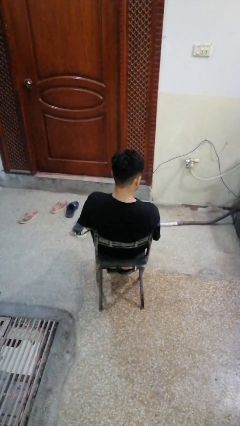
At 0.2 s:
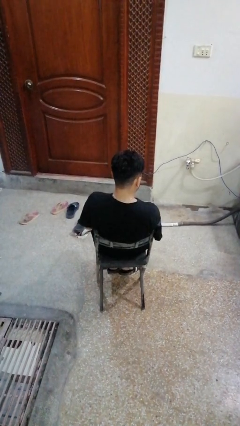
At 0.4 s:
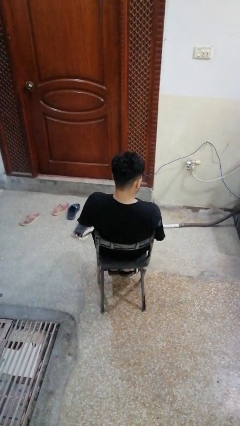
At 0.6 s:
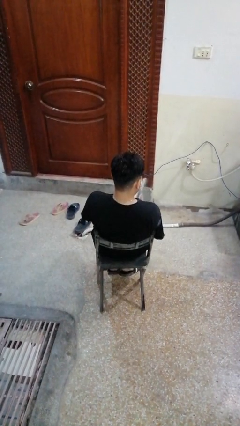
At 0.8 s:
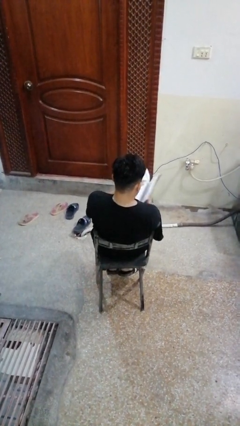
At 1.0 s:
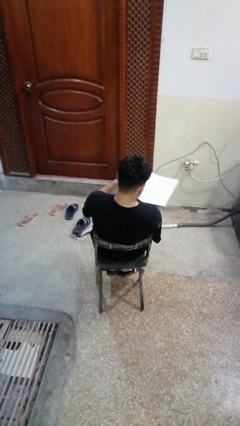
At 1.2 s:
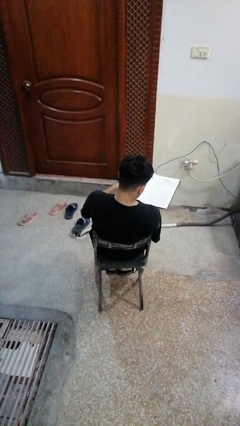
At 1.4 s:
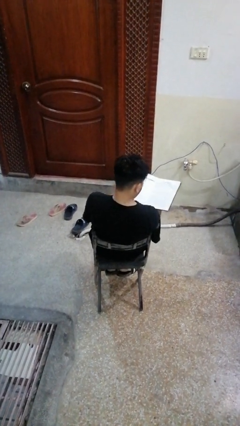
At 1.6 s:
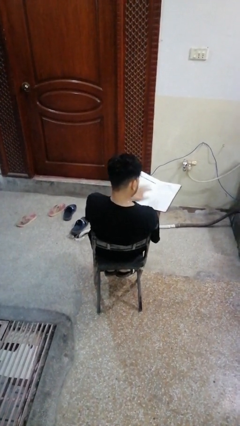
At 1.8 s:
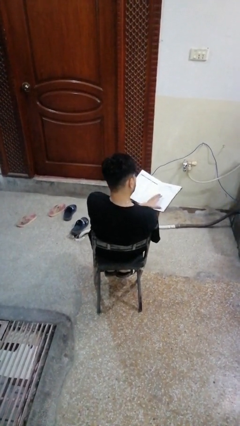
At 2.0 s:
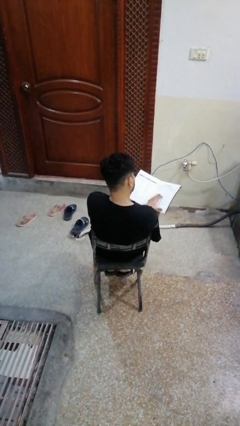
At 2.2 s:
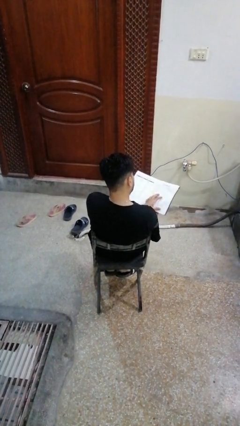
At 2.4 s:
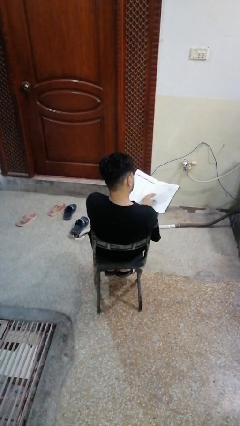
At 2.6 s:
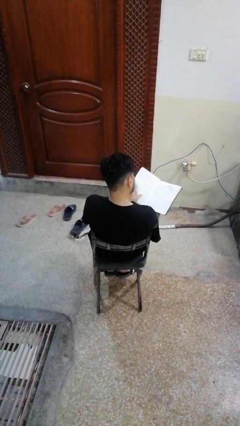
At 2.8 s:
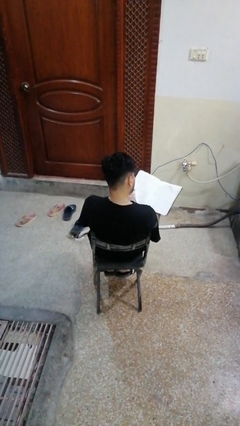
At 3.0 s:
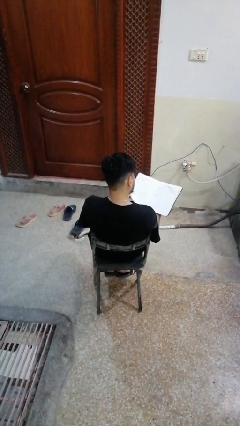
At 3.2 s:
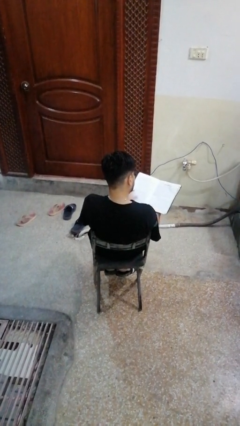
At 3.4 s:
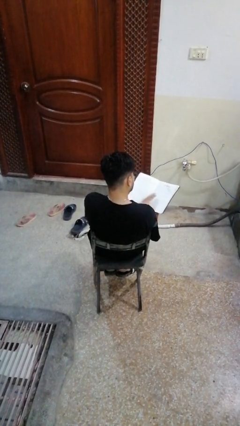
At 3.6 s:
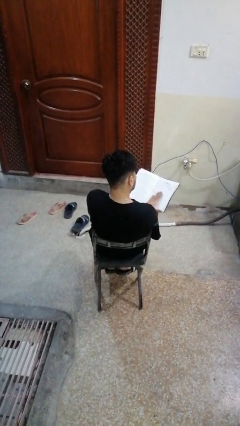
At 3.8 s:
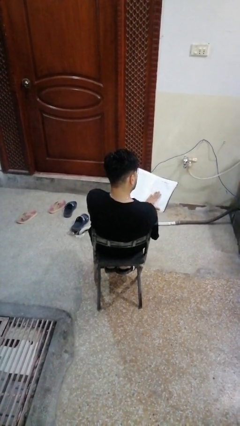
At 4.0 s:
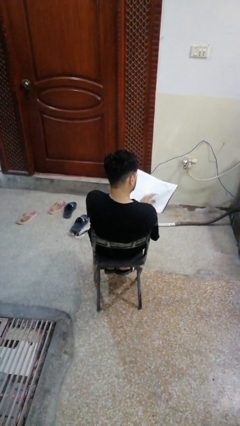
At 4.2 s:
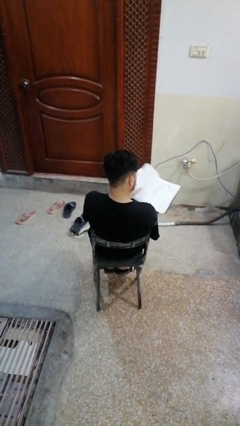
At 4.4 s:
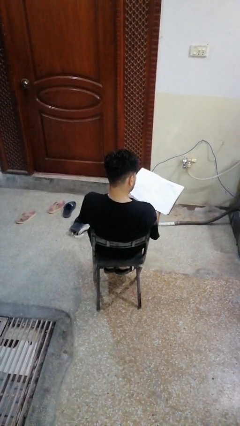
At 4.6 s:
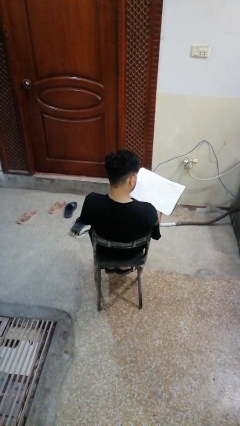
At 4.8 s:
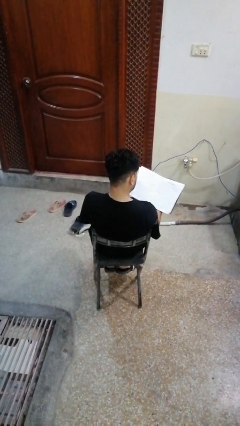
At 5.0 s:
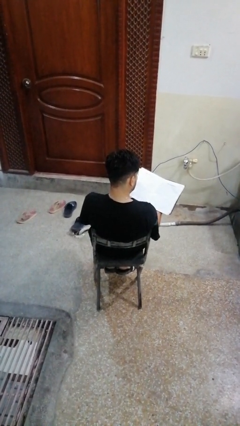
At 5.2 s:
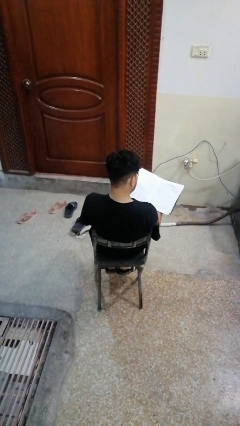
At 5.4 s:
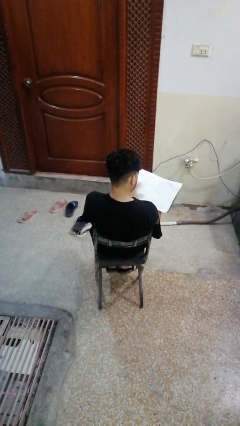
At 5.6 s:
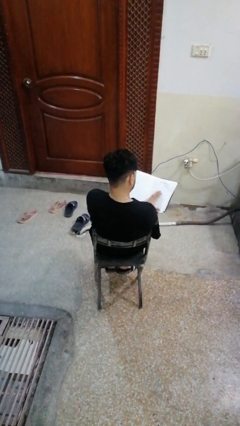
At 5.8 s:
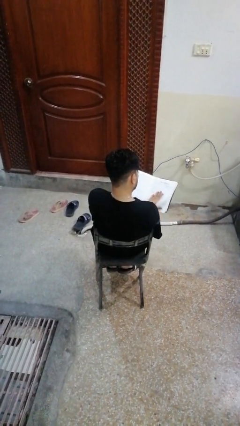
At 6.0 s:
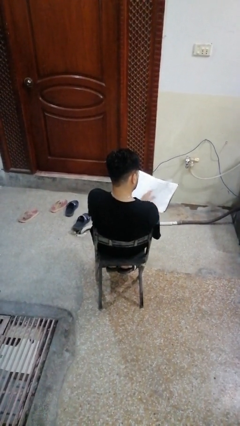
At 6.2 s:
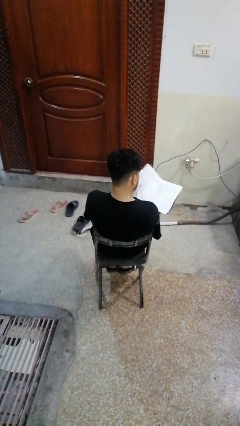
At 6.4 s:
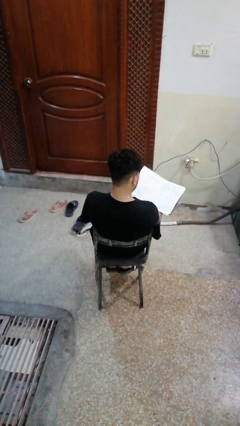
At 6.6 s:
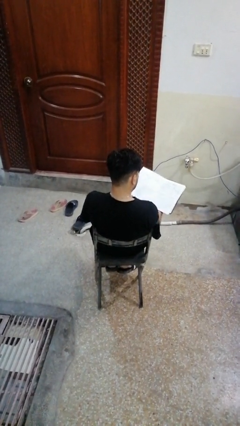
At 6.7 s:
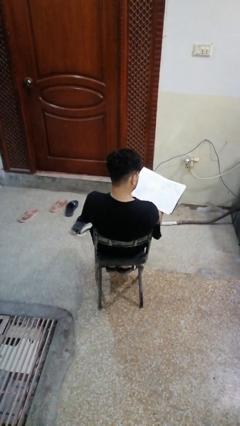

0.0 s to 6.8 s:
person reads book

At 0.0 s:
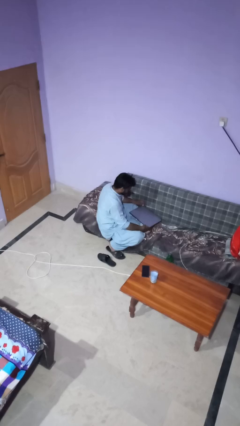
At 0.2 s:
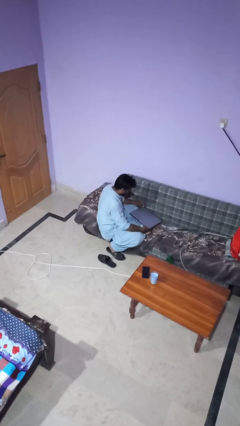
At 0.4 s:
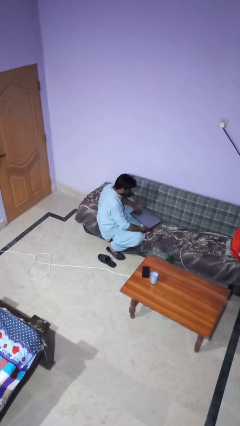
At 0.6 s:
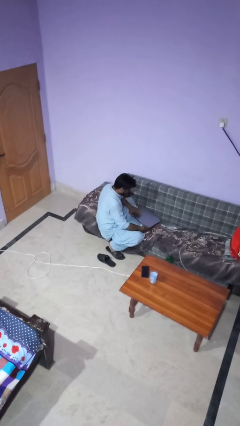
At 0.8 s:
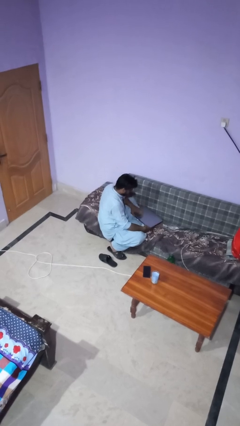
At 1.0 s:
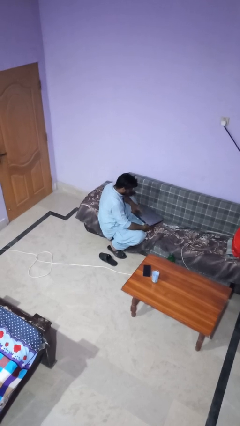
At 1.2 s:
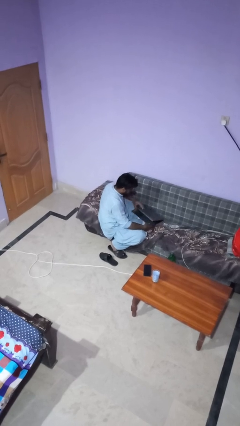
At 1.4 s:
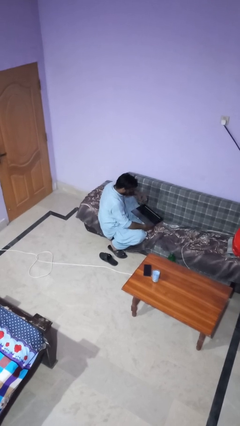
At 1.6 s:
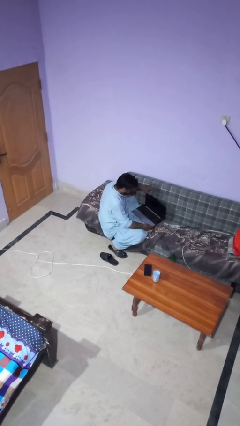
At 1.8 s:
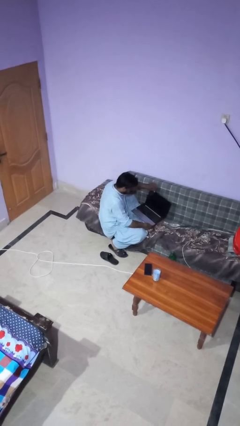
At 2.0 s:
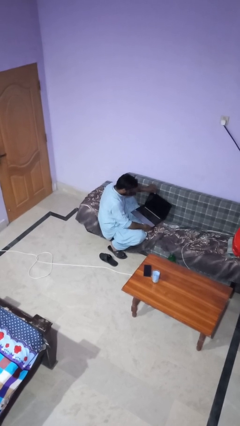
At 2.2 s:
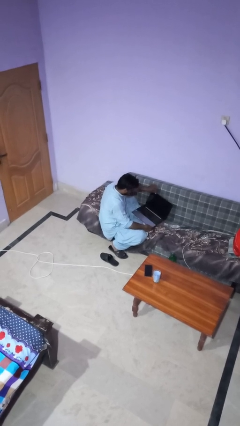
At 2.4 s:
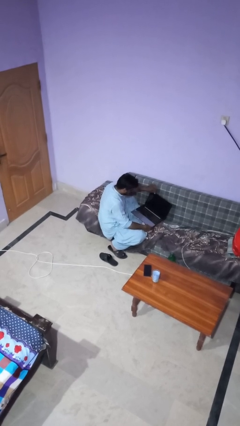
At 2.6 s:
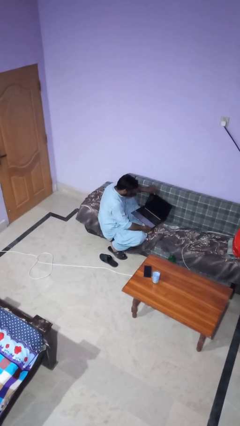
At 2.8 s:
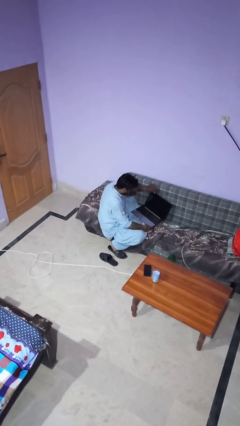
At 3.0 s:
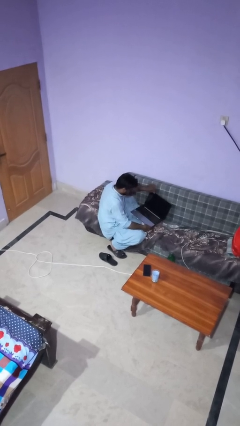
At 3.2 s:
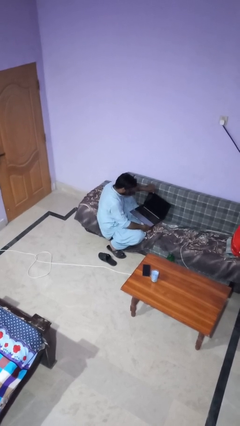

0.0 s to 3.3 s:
person opens laptop

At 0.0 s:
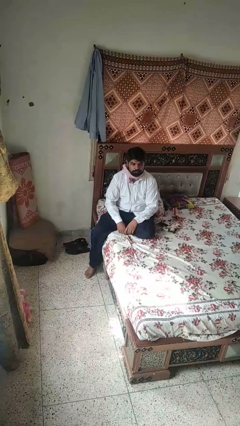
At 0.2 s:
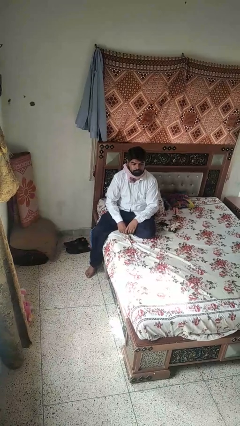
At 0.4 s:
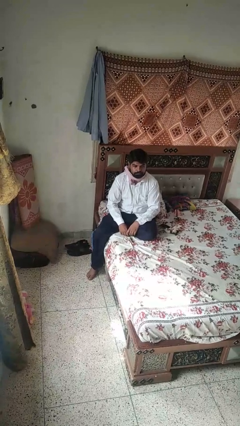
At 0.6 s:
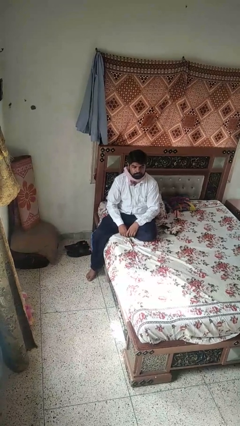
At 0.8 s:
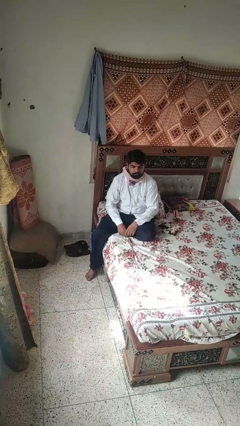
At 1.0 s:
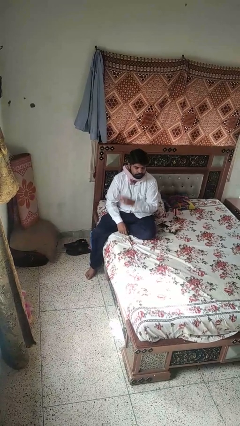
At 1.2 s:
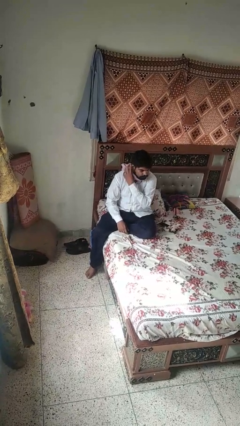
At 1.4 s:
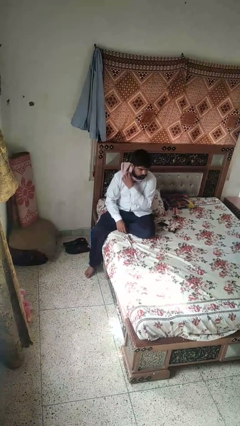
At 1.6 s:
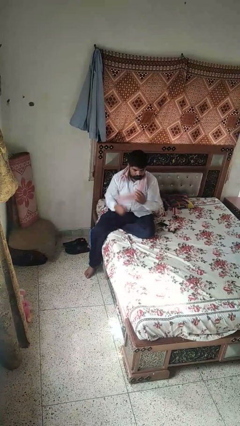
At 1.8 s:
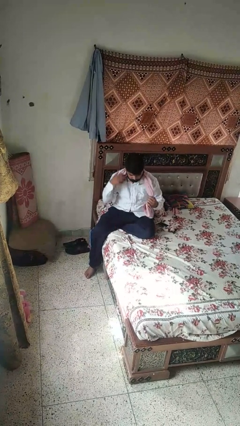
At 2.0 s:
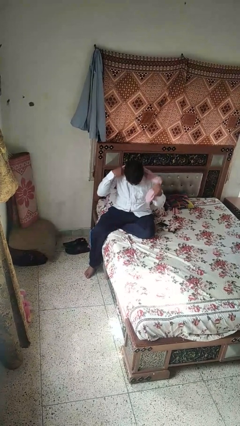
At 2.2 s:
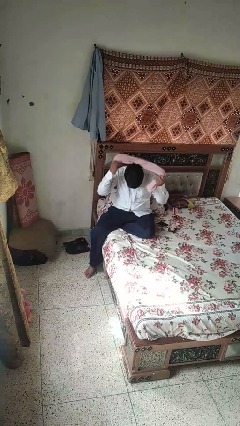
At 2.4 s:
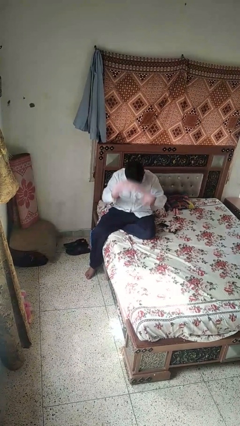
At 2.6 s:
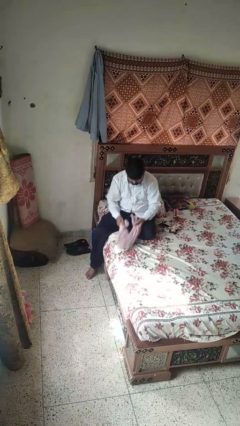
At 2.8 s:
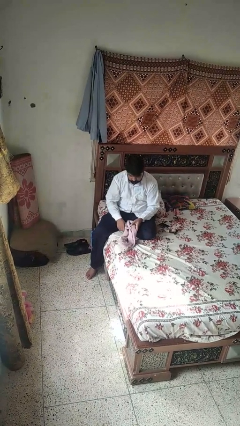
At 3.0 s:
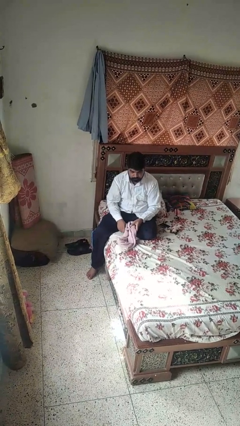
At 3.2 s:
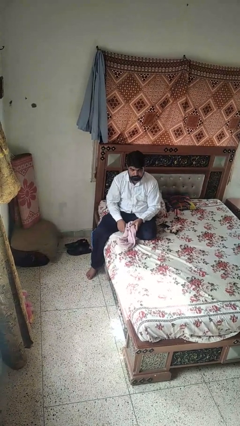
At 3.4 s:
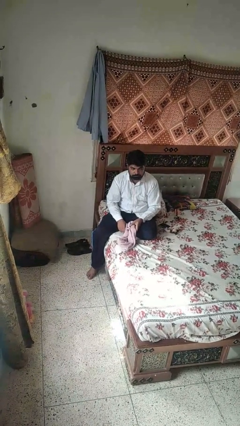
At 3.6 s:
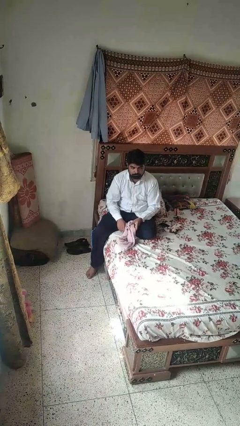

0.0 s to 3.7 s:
person takes off scarf

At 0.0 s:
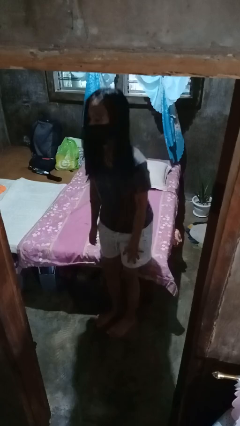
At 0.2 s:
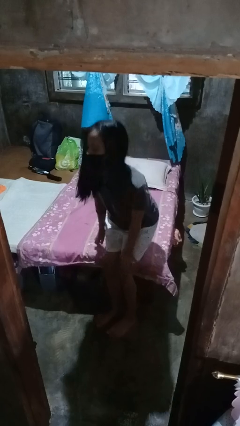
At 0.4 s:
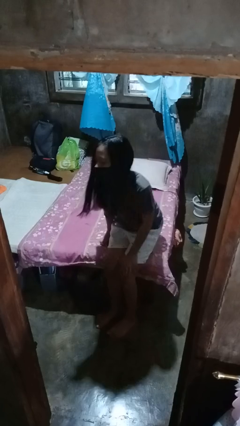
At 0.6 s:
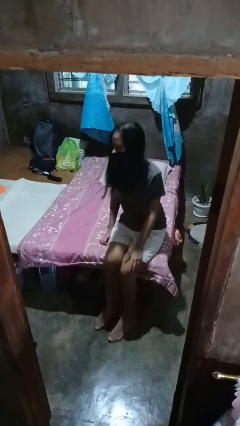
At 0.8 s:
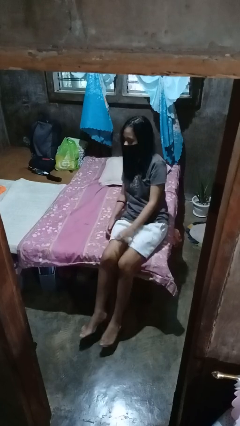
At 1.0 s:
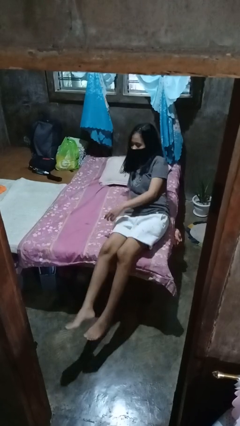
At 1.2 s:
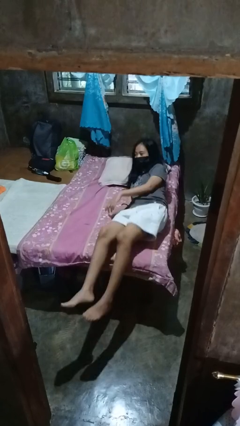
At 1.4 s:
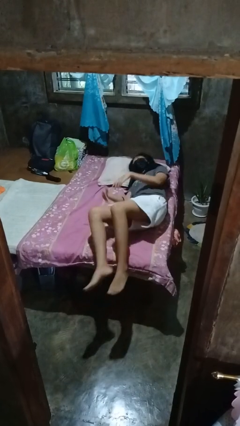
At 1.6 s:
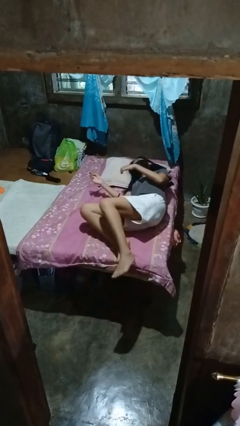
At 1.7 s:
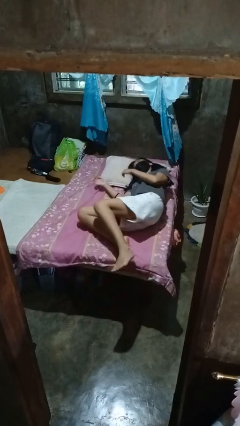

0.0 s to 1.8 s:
person lies down on bed

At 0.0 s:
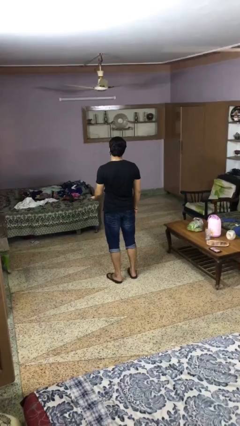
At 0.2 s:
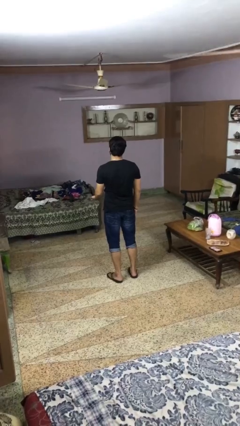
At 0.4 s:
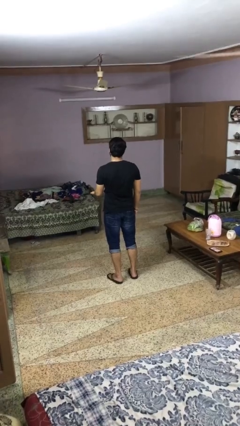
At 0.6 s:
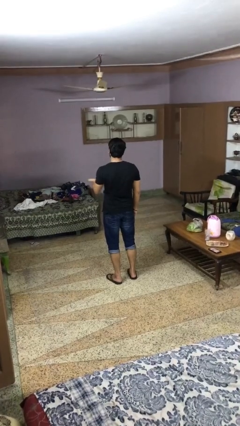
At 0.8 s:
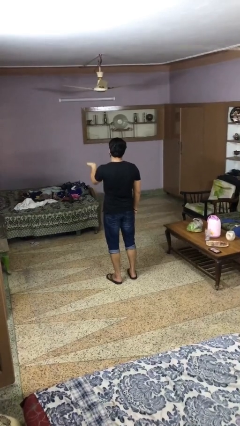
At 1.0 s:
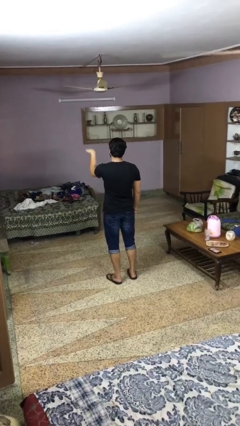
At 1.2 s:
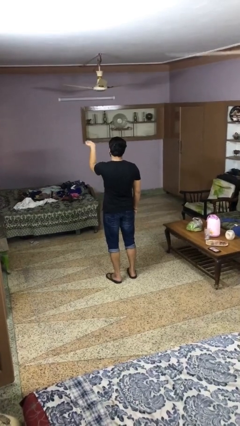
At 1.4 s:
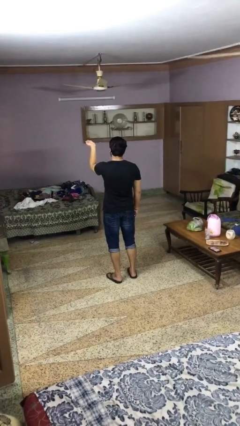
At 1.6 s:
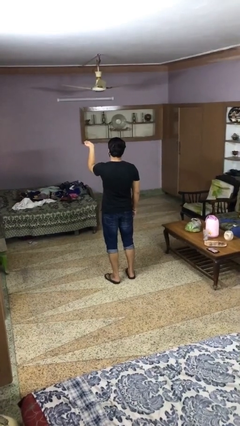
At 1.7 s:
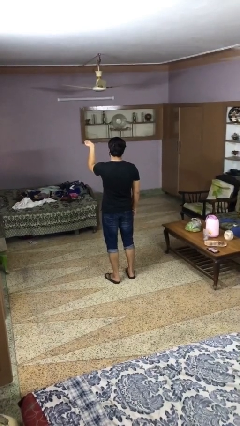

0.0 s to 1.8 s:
person gestures swipe up
